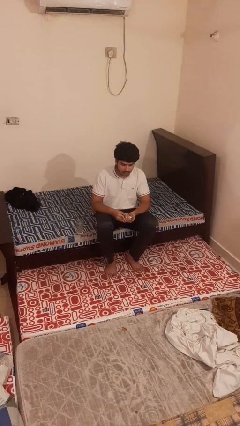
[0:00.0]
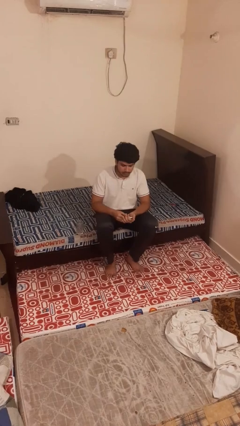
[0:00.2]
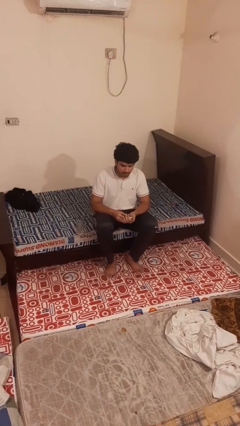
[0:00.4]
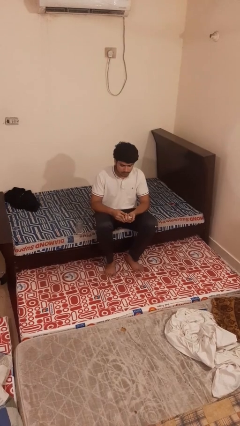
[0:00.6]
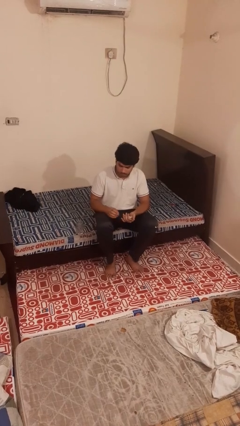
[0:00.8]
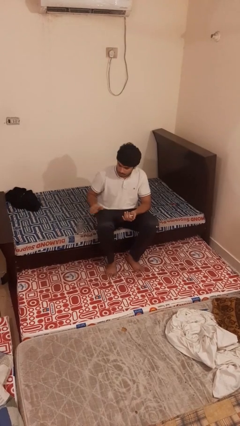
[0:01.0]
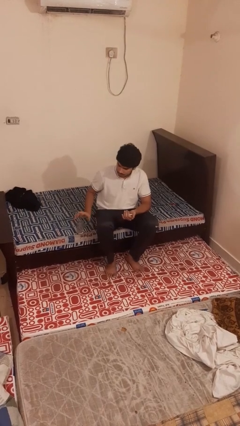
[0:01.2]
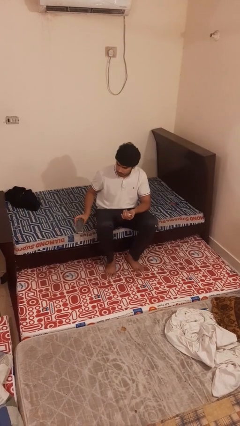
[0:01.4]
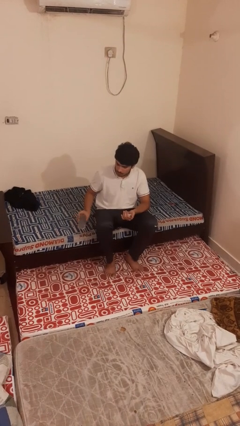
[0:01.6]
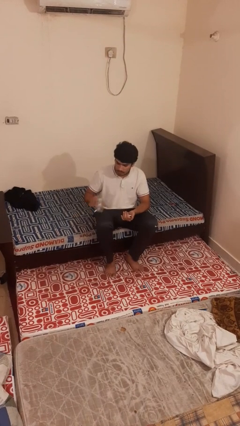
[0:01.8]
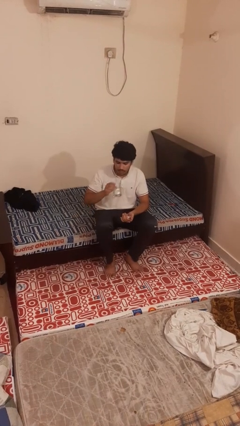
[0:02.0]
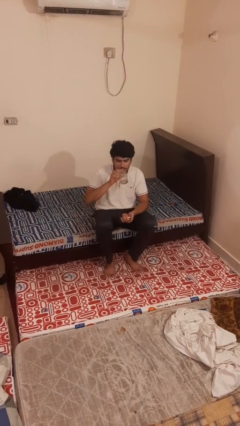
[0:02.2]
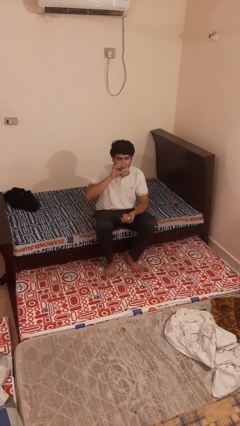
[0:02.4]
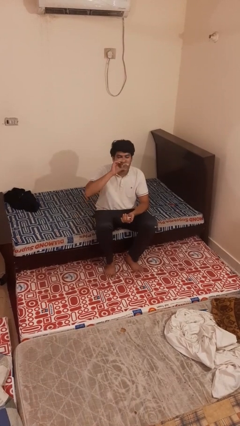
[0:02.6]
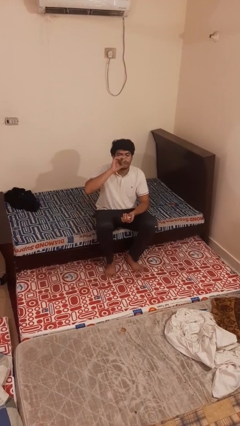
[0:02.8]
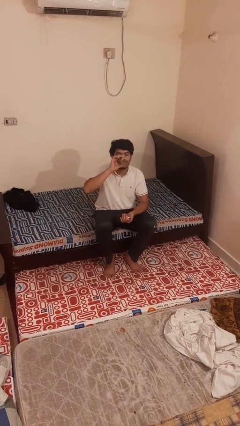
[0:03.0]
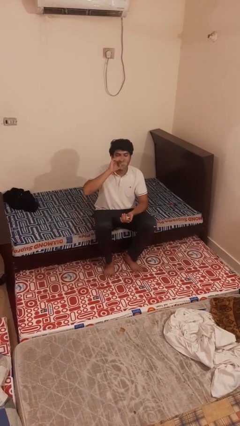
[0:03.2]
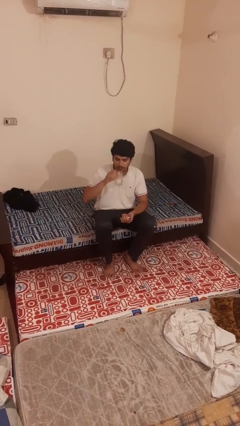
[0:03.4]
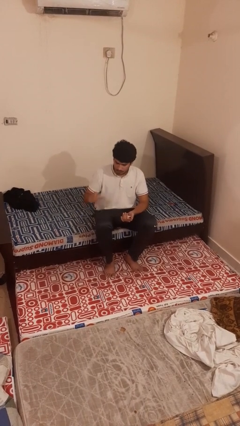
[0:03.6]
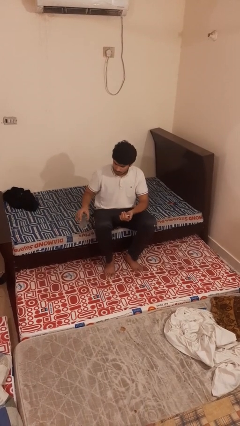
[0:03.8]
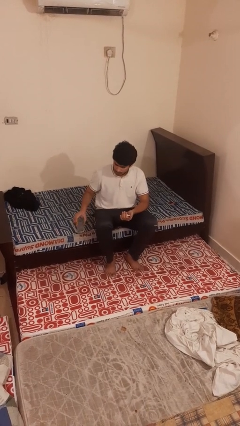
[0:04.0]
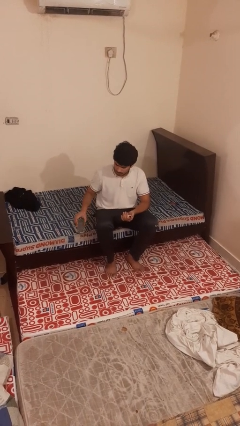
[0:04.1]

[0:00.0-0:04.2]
person drinks from cup

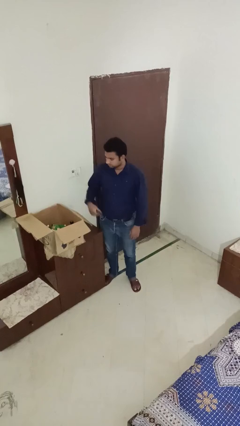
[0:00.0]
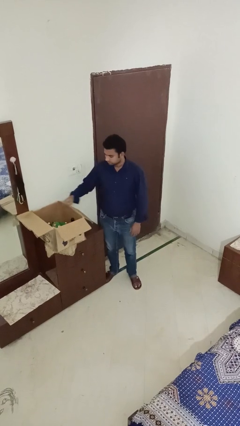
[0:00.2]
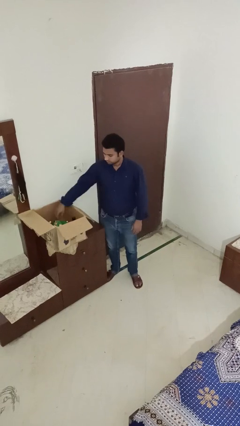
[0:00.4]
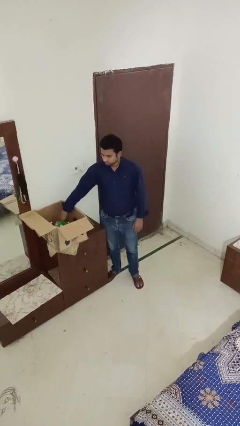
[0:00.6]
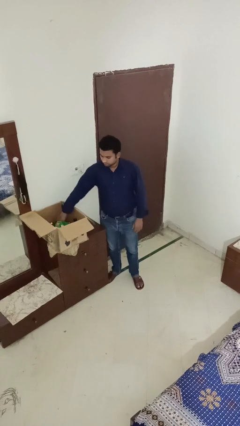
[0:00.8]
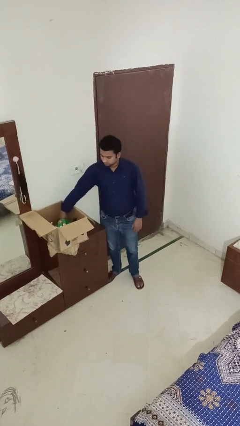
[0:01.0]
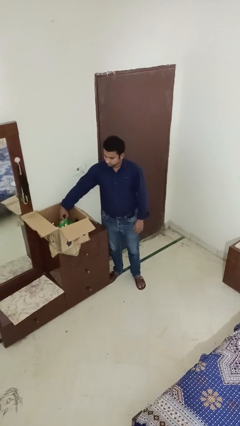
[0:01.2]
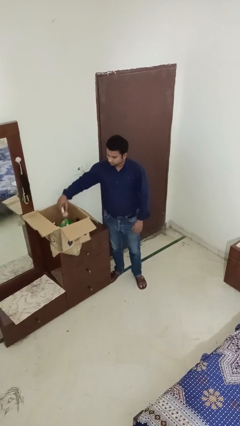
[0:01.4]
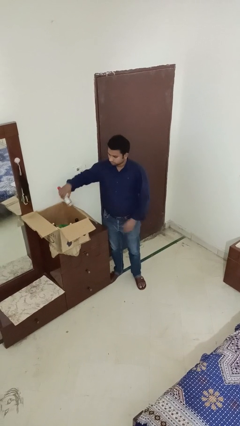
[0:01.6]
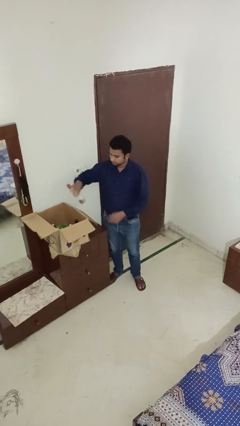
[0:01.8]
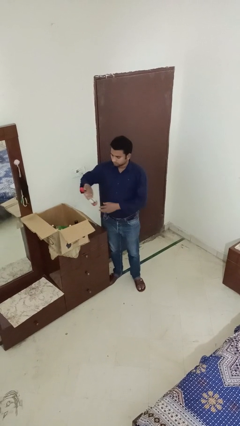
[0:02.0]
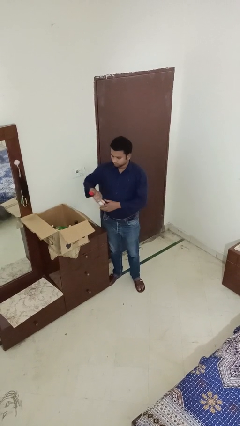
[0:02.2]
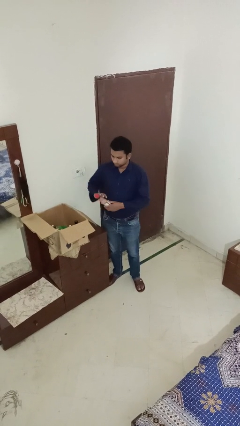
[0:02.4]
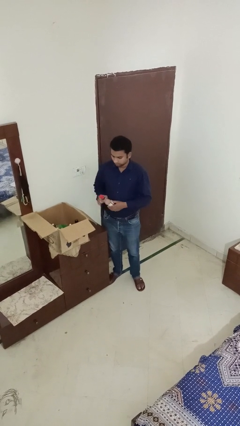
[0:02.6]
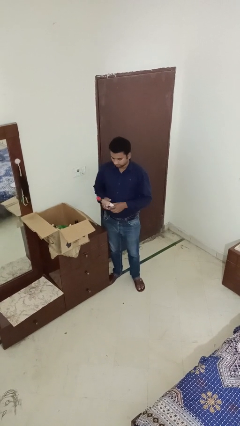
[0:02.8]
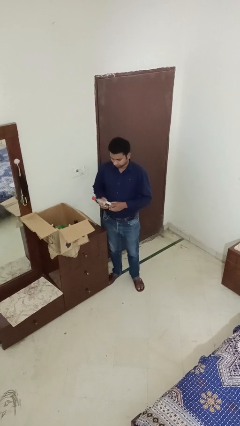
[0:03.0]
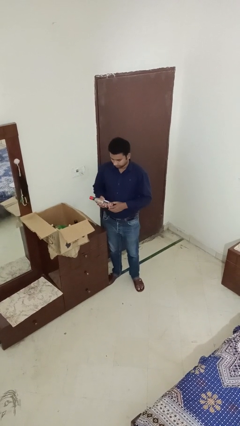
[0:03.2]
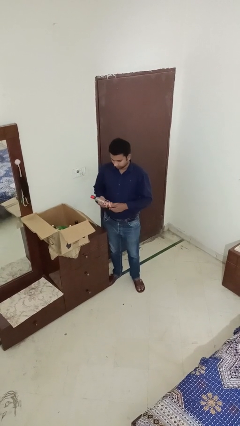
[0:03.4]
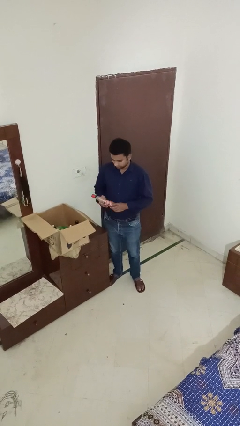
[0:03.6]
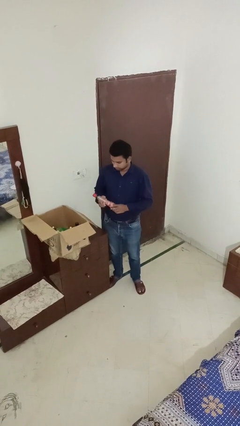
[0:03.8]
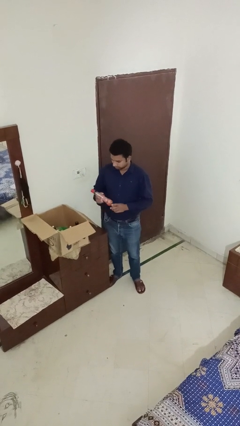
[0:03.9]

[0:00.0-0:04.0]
person takes object from box

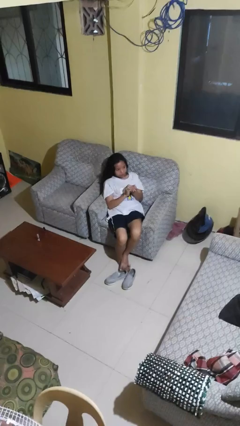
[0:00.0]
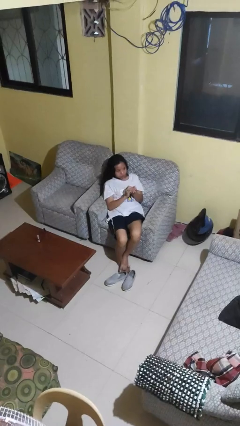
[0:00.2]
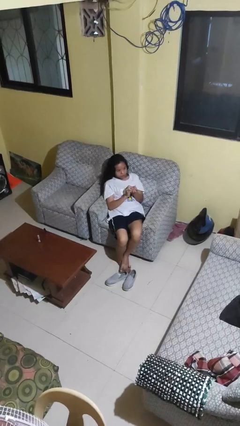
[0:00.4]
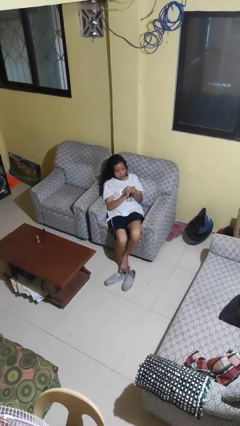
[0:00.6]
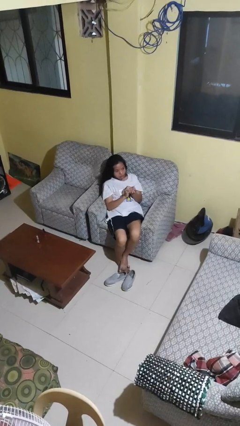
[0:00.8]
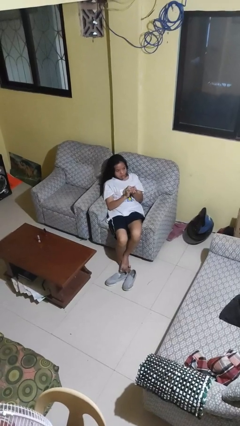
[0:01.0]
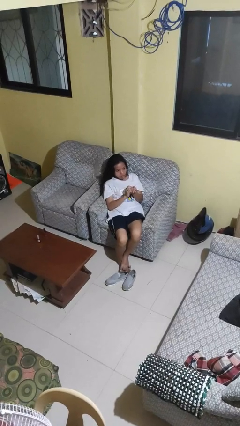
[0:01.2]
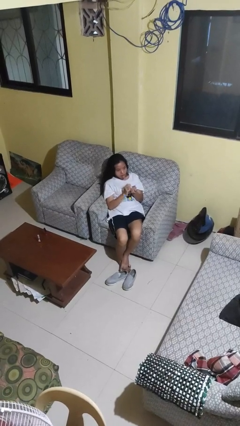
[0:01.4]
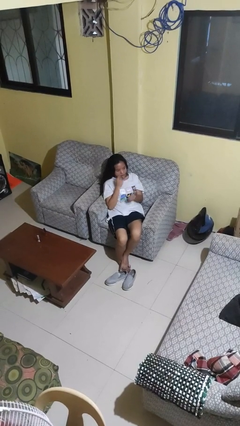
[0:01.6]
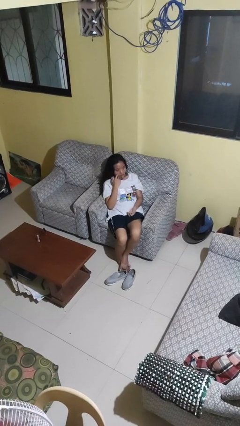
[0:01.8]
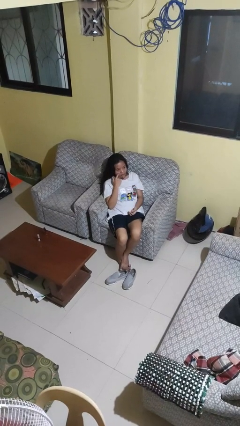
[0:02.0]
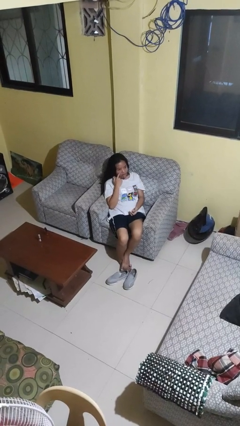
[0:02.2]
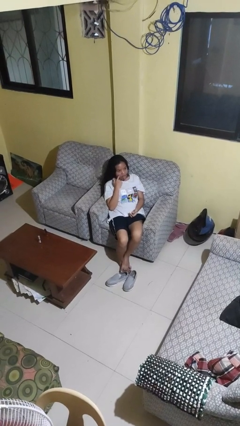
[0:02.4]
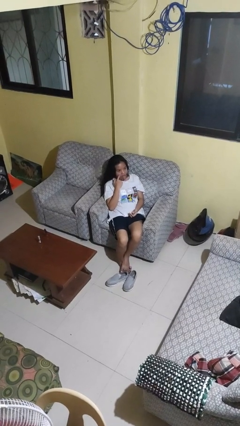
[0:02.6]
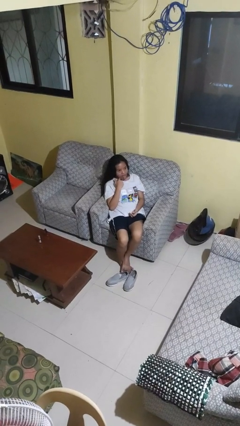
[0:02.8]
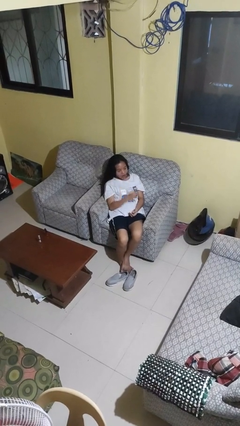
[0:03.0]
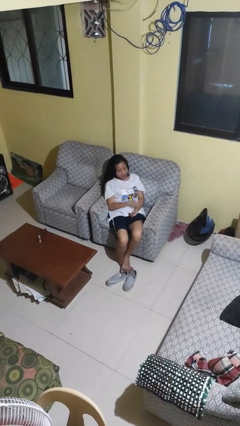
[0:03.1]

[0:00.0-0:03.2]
person sticks out tongue

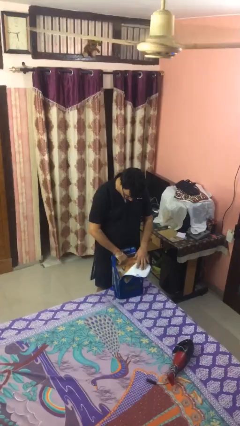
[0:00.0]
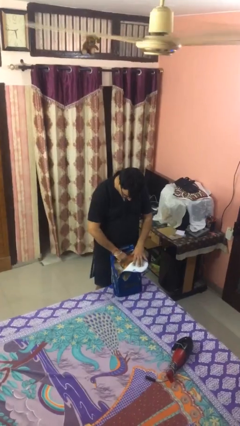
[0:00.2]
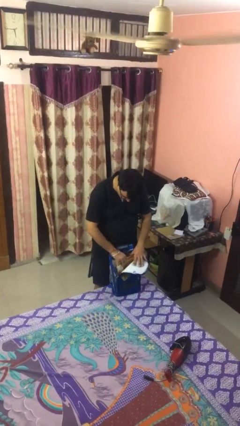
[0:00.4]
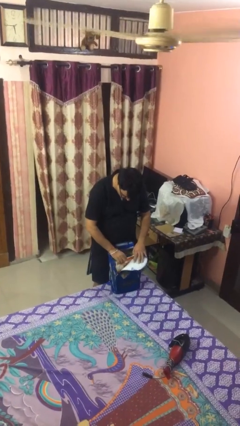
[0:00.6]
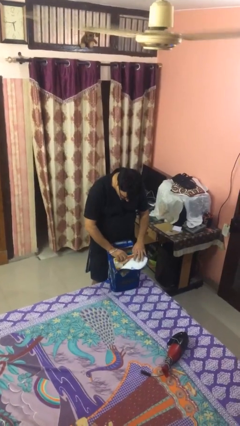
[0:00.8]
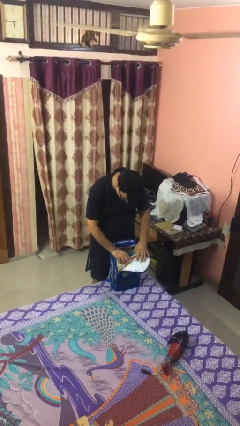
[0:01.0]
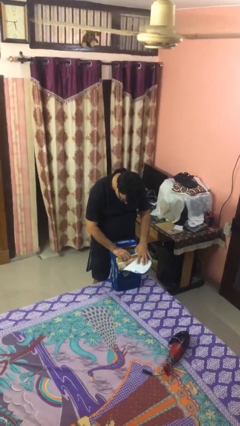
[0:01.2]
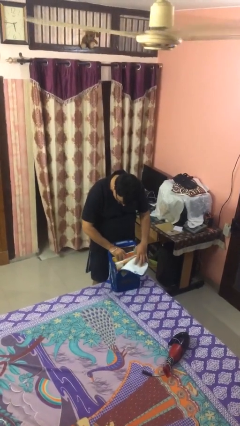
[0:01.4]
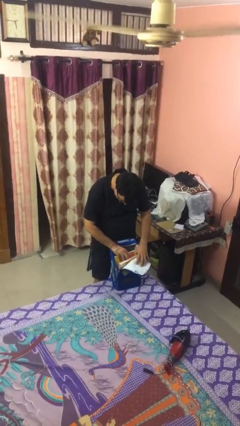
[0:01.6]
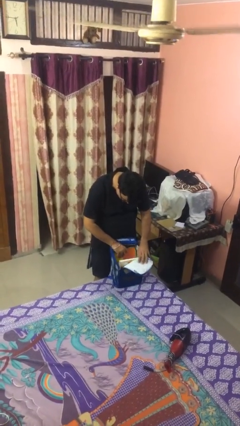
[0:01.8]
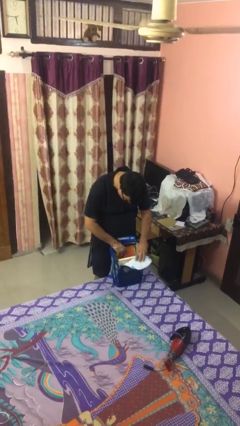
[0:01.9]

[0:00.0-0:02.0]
person searches in backpack

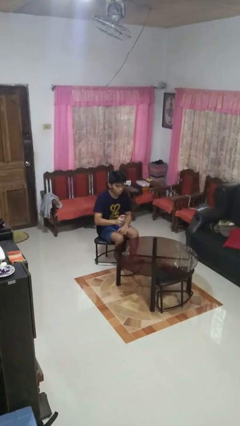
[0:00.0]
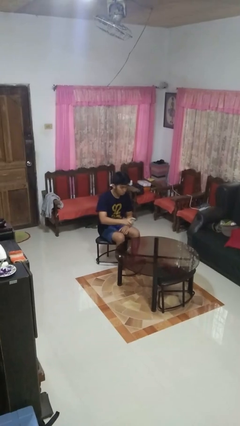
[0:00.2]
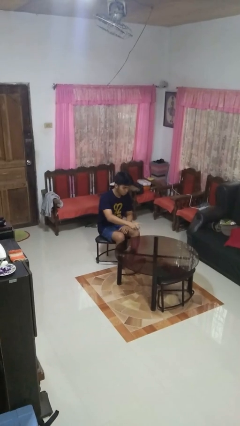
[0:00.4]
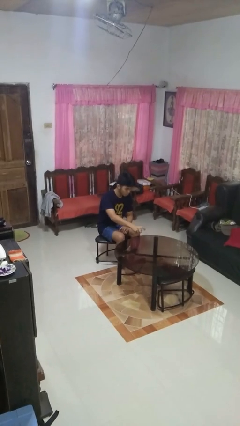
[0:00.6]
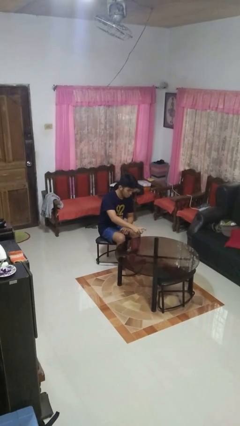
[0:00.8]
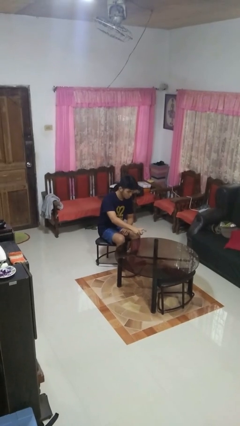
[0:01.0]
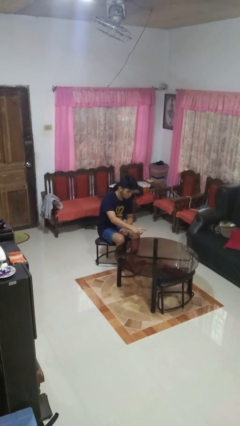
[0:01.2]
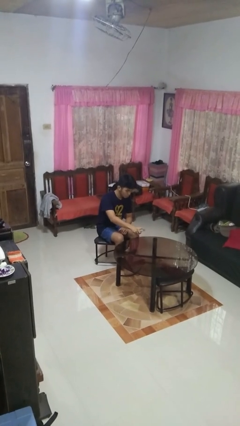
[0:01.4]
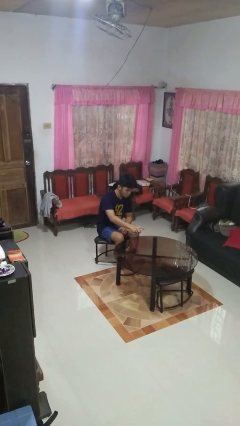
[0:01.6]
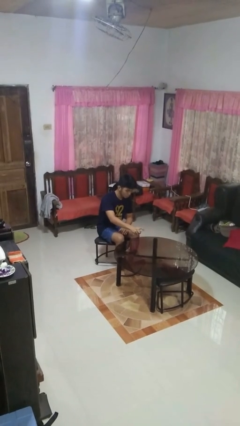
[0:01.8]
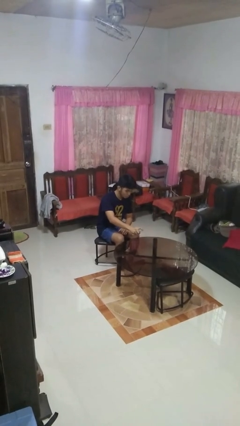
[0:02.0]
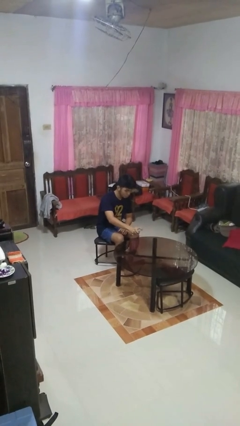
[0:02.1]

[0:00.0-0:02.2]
person sprays from bottle

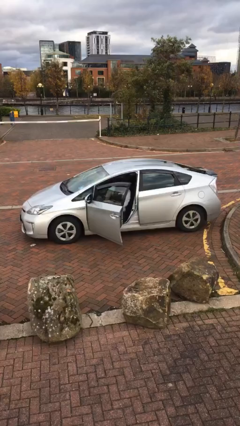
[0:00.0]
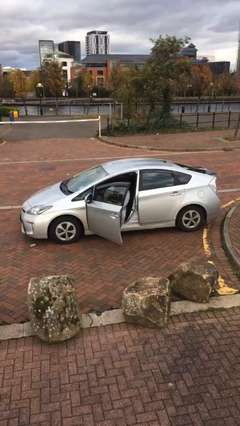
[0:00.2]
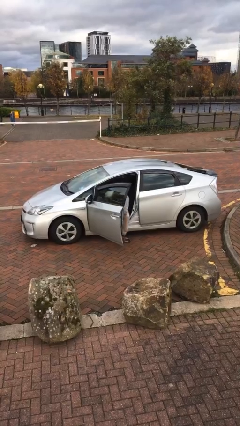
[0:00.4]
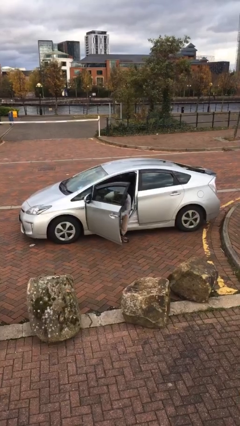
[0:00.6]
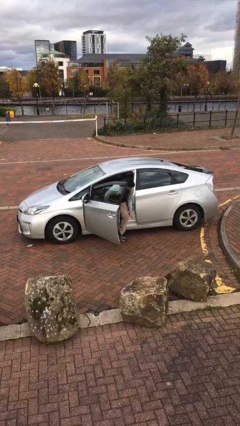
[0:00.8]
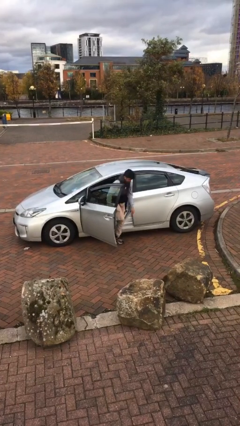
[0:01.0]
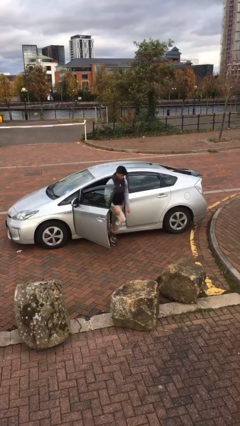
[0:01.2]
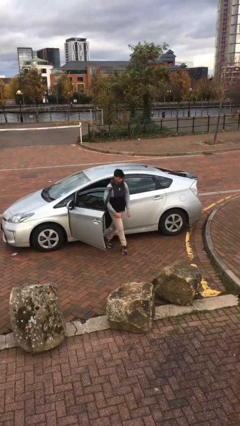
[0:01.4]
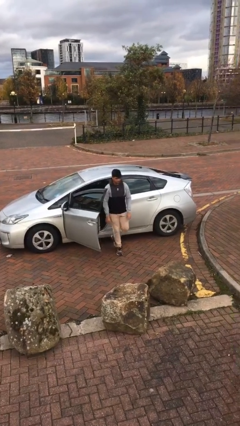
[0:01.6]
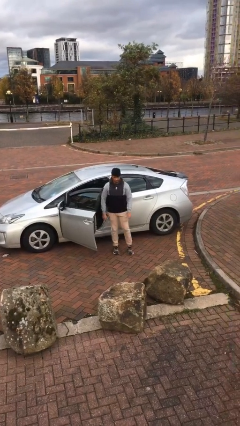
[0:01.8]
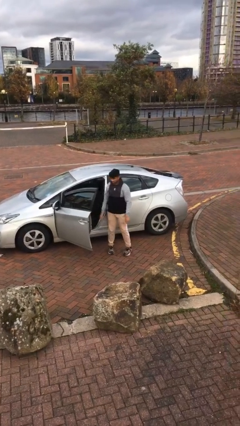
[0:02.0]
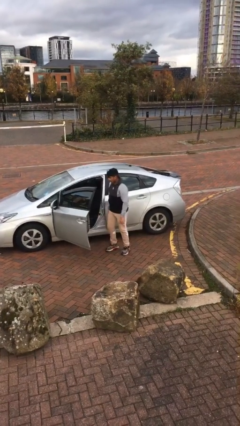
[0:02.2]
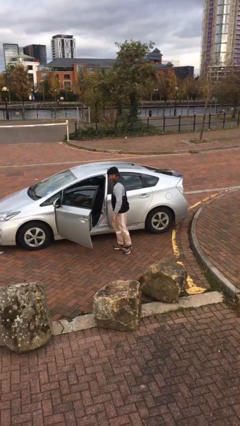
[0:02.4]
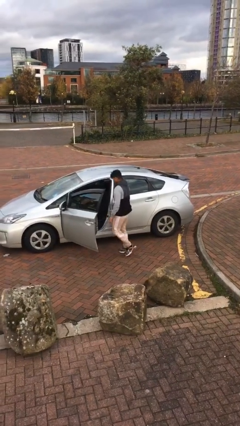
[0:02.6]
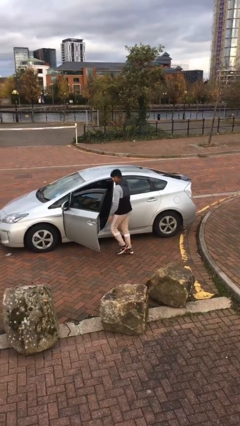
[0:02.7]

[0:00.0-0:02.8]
person exits car
